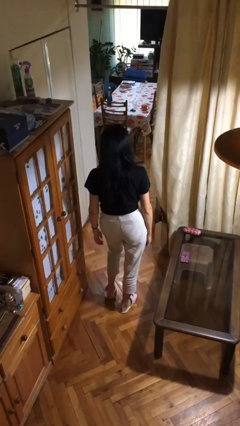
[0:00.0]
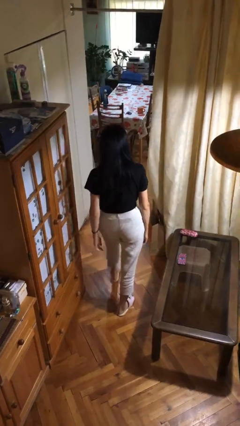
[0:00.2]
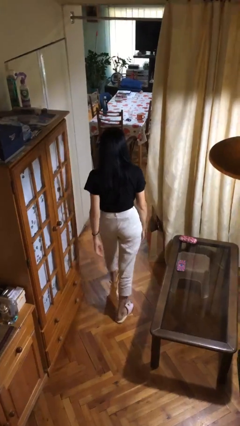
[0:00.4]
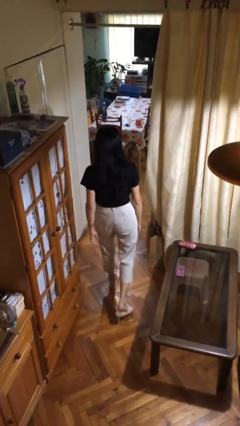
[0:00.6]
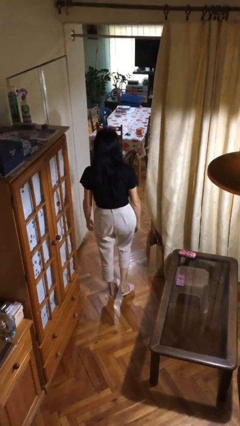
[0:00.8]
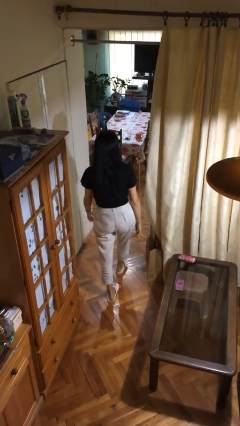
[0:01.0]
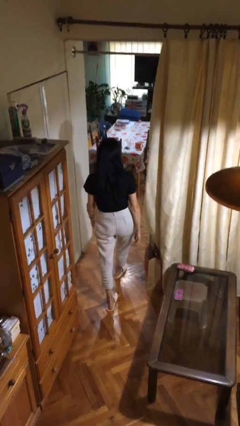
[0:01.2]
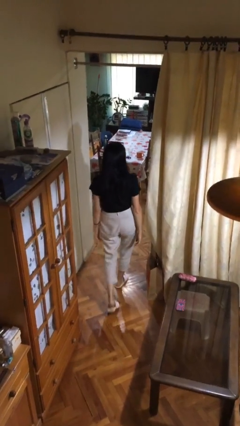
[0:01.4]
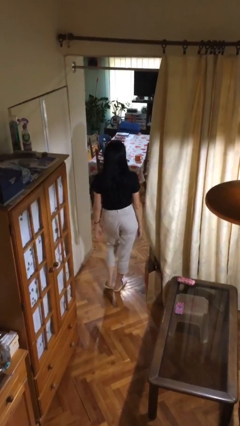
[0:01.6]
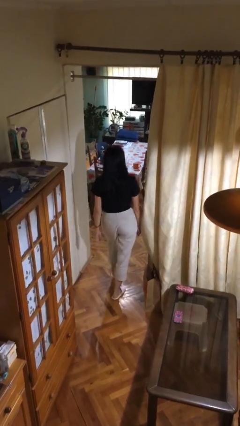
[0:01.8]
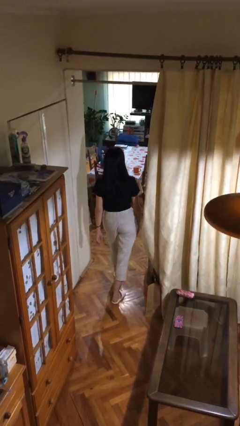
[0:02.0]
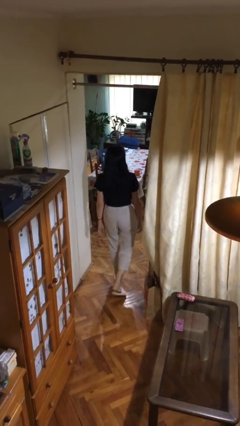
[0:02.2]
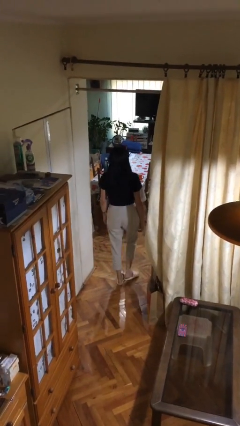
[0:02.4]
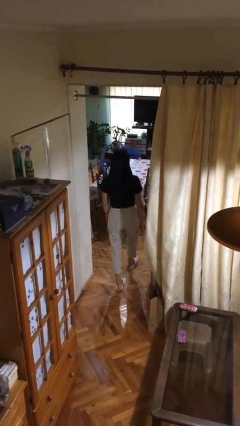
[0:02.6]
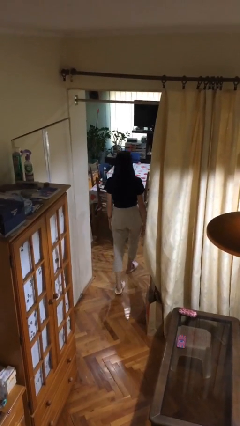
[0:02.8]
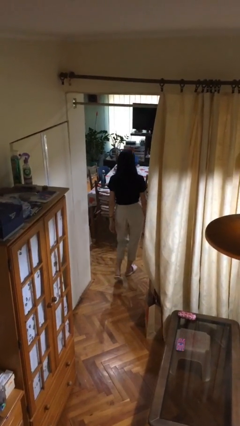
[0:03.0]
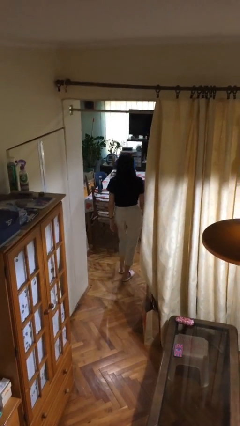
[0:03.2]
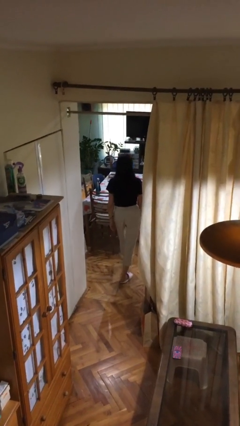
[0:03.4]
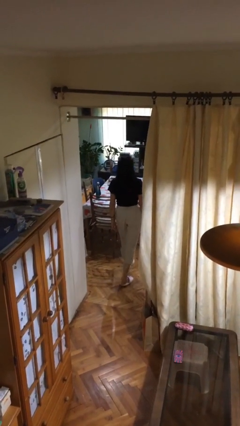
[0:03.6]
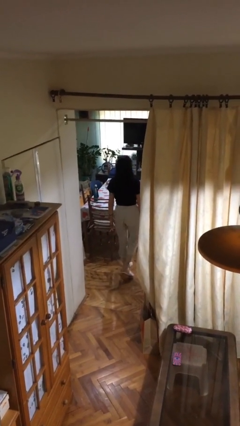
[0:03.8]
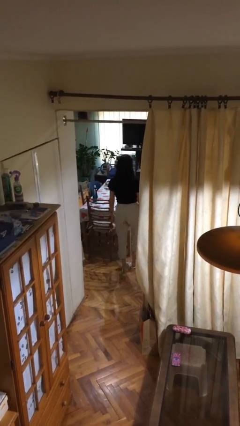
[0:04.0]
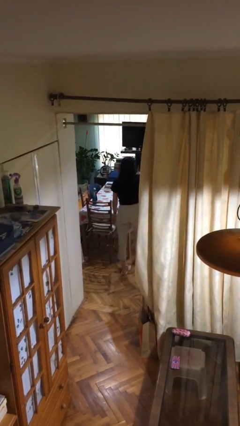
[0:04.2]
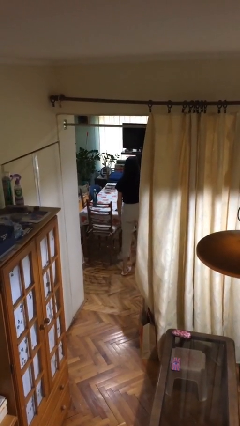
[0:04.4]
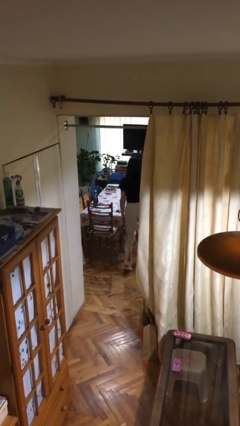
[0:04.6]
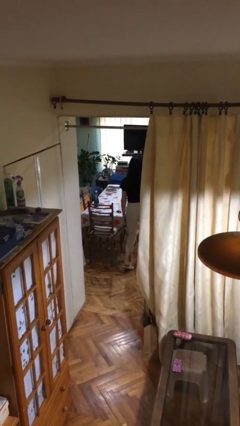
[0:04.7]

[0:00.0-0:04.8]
person exits scene through structure

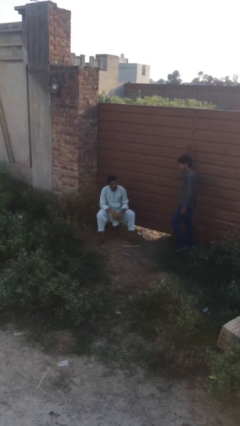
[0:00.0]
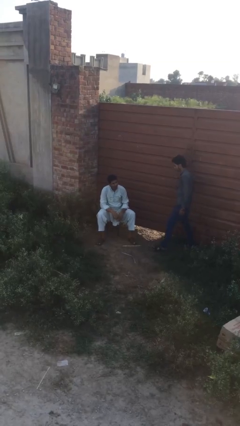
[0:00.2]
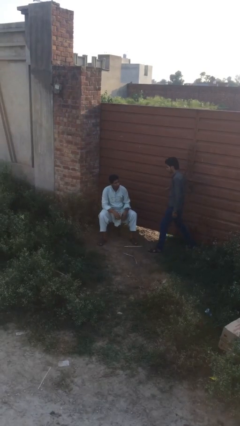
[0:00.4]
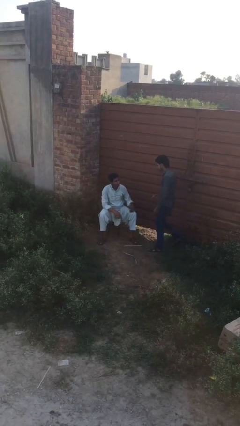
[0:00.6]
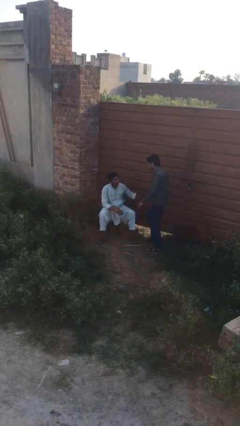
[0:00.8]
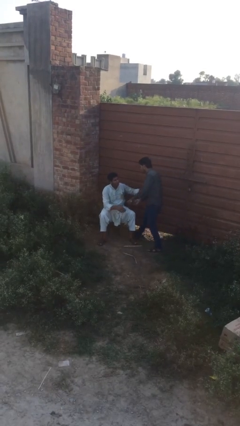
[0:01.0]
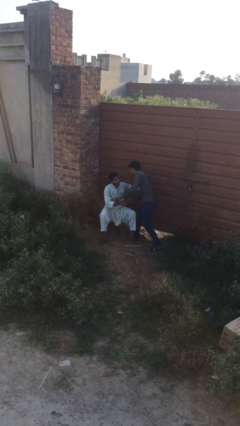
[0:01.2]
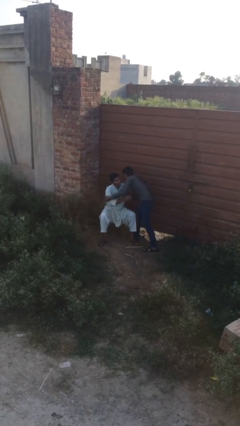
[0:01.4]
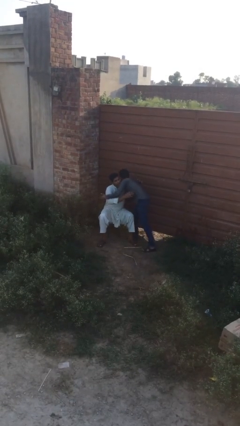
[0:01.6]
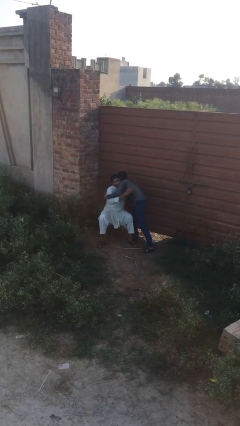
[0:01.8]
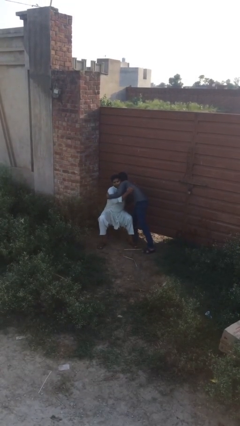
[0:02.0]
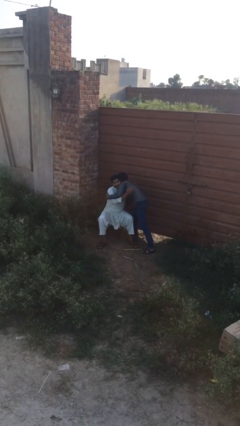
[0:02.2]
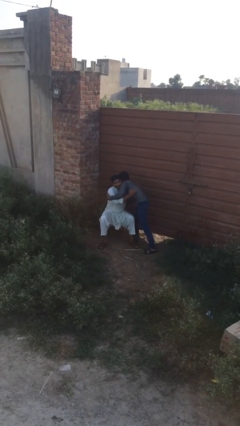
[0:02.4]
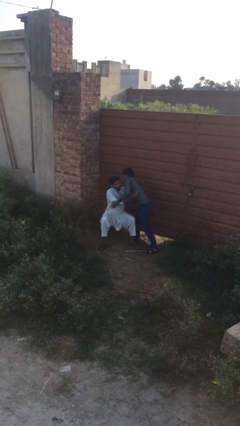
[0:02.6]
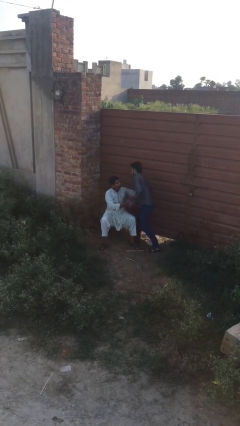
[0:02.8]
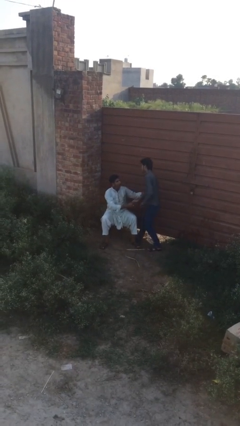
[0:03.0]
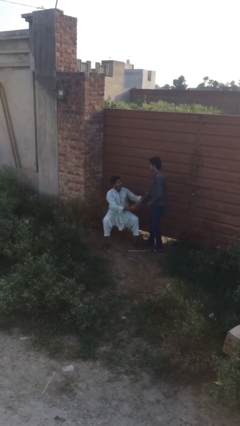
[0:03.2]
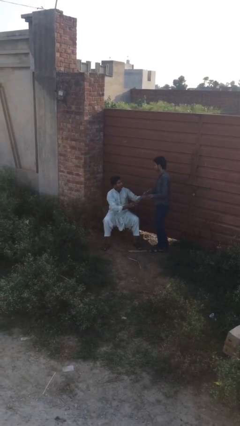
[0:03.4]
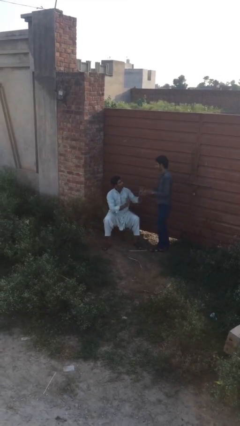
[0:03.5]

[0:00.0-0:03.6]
person embraces person

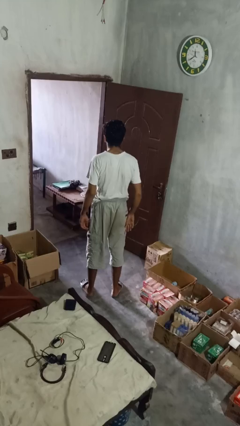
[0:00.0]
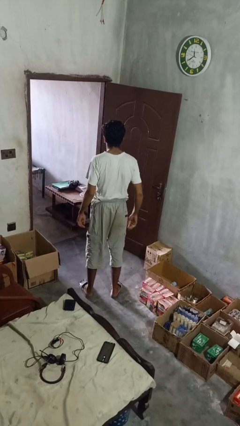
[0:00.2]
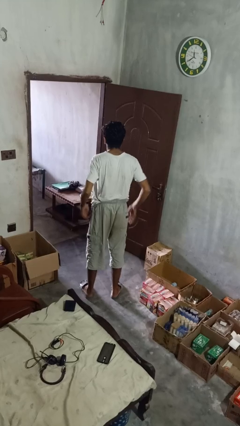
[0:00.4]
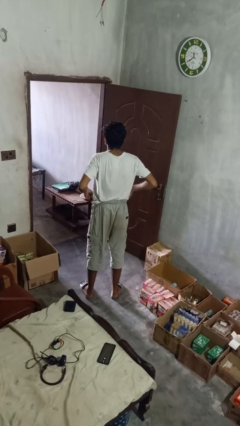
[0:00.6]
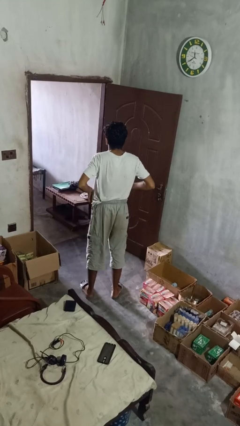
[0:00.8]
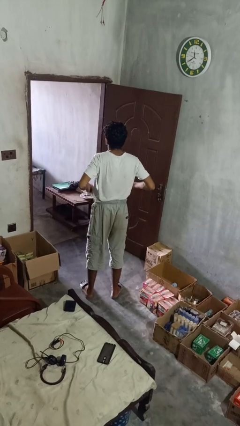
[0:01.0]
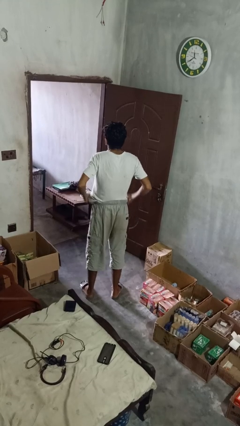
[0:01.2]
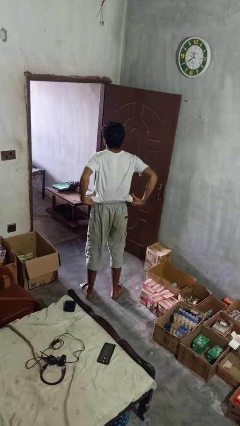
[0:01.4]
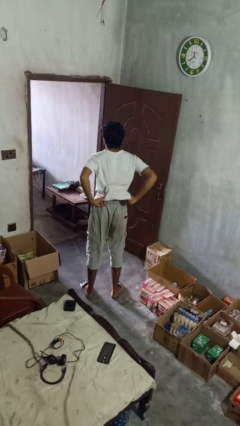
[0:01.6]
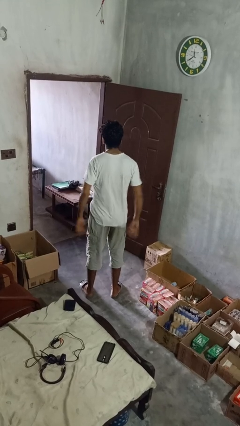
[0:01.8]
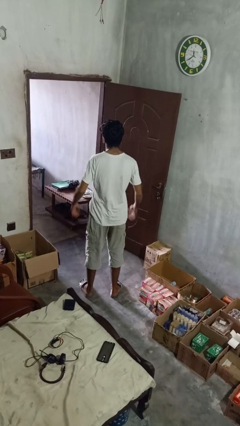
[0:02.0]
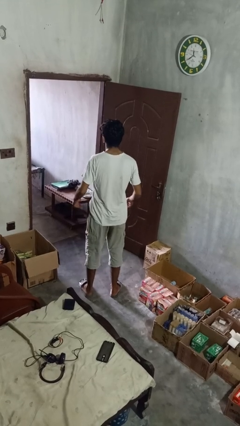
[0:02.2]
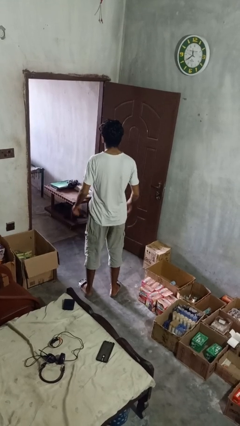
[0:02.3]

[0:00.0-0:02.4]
person untucks shirt

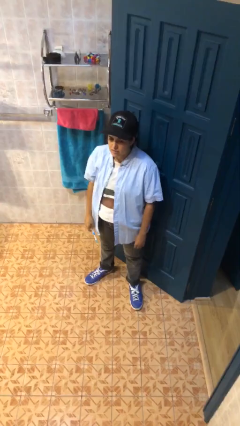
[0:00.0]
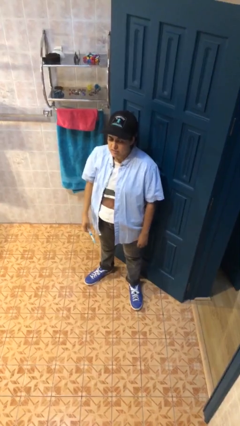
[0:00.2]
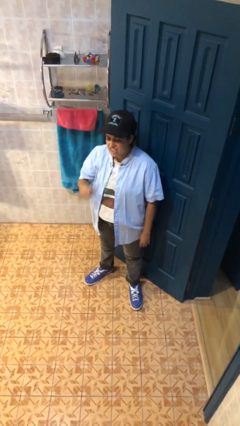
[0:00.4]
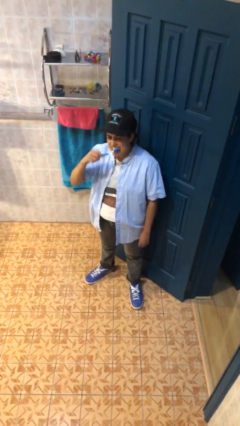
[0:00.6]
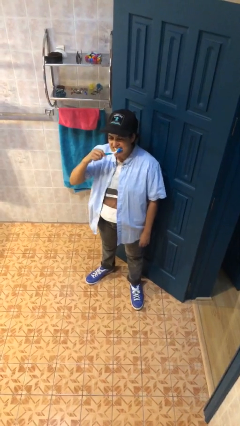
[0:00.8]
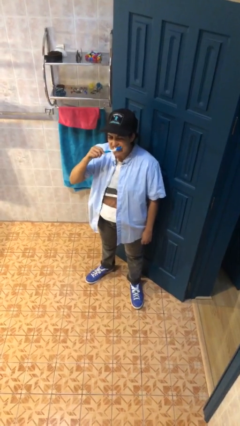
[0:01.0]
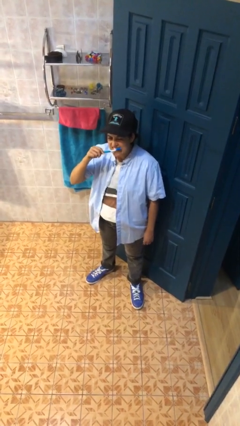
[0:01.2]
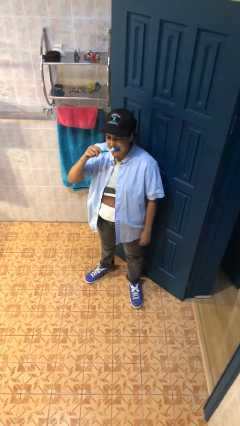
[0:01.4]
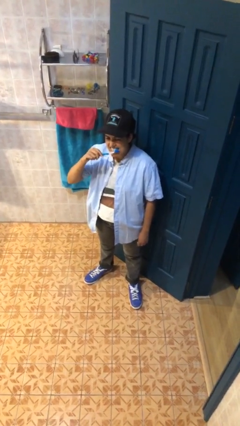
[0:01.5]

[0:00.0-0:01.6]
person brushes teeth

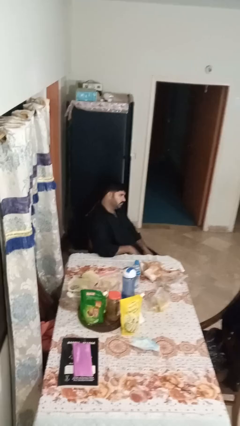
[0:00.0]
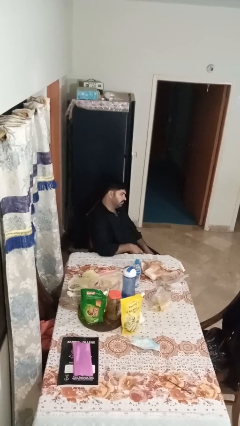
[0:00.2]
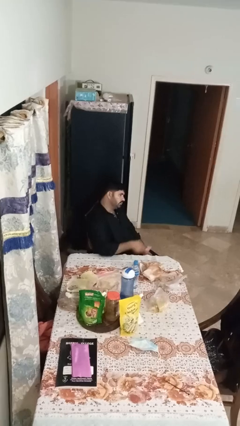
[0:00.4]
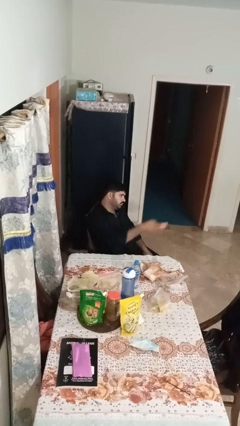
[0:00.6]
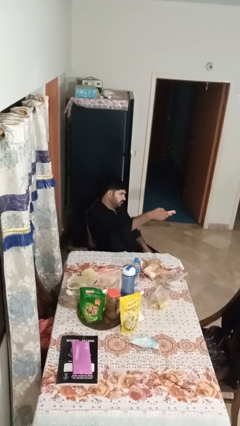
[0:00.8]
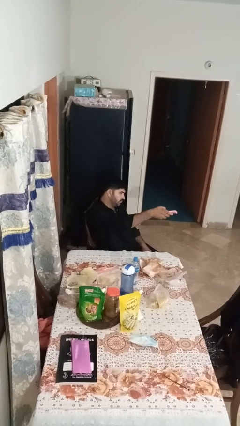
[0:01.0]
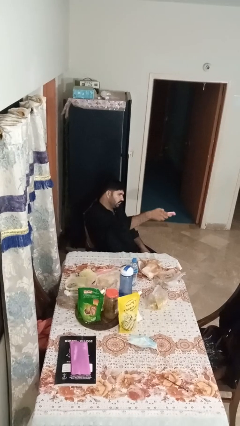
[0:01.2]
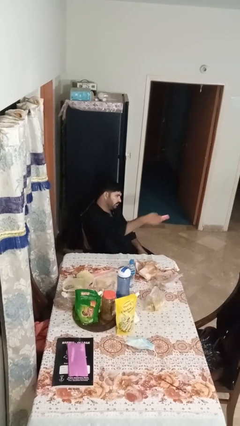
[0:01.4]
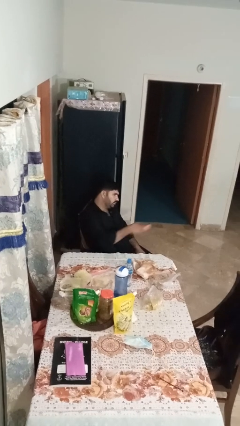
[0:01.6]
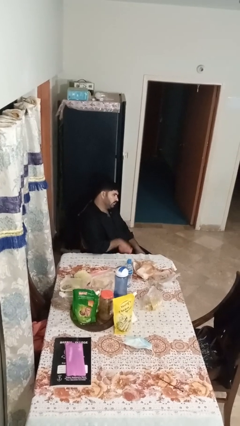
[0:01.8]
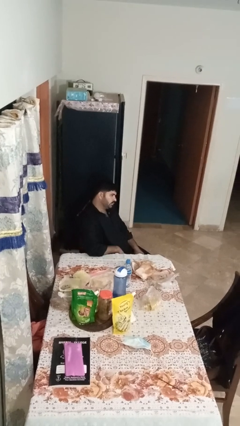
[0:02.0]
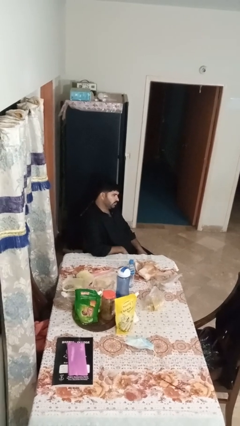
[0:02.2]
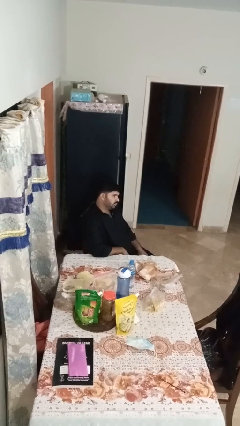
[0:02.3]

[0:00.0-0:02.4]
person uses television remote

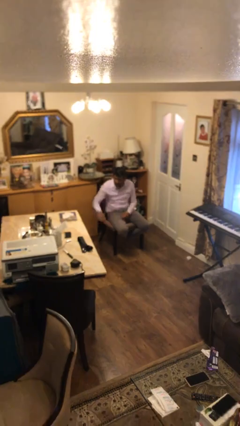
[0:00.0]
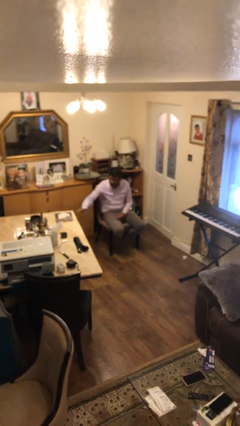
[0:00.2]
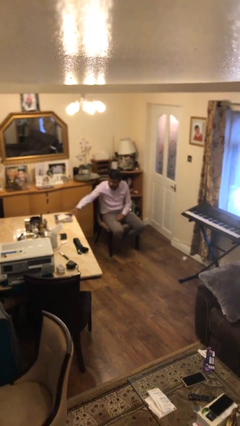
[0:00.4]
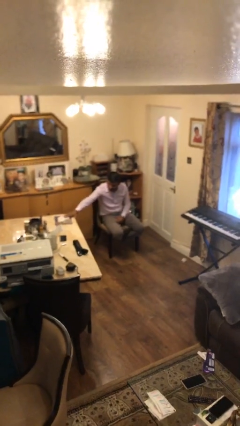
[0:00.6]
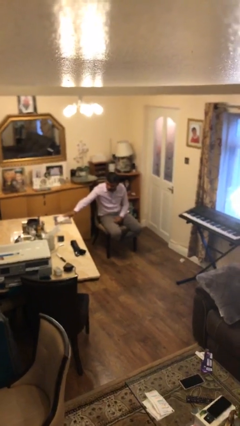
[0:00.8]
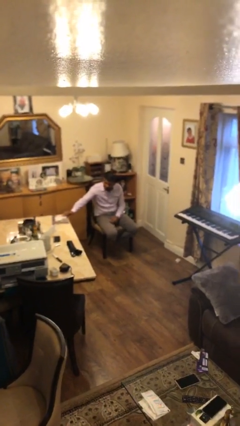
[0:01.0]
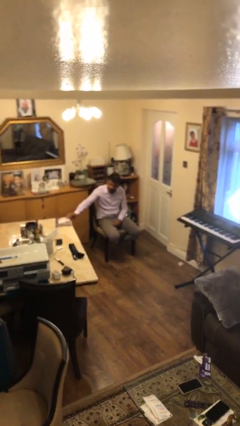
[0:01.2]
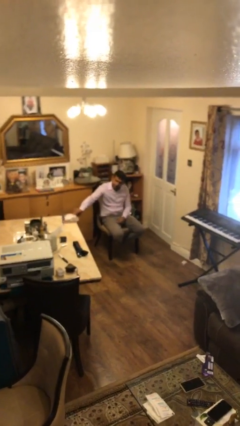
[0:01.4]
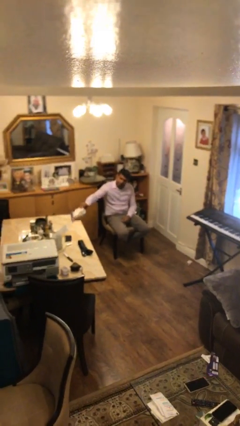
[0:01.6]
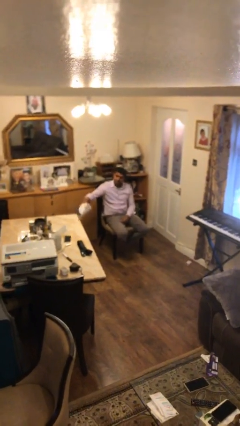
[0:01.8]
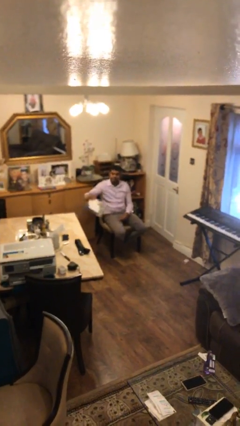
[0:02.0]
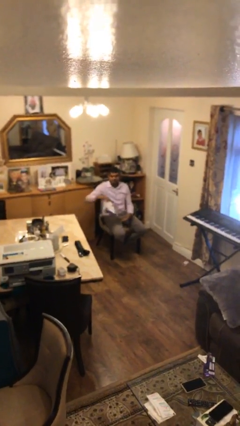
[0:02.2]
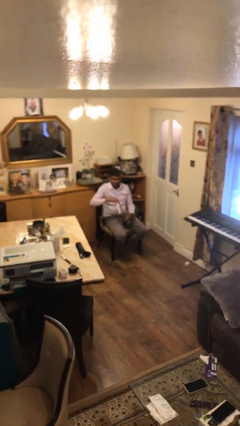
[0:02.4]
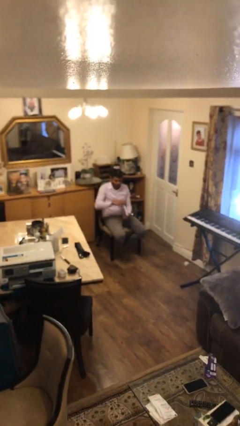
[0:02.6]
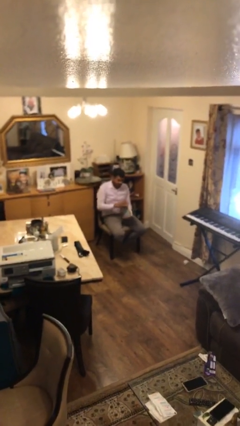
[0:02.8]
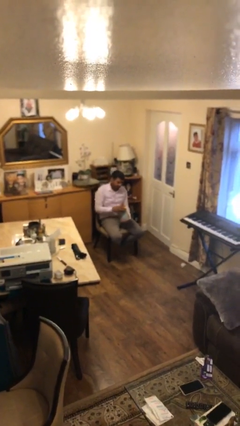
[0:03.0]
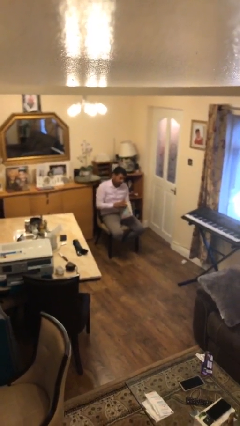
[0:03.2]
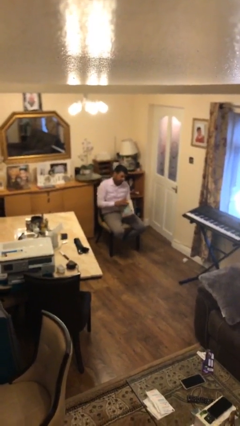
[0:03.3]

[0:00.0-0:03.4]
person picks up object from table
